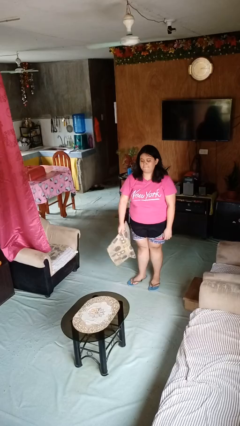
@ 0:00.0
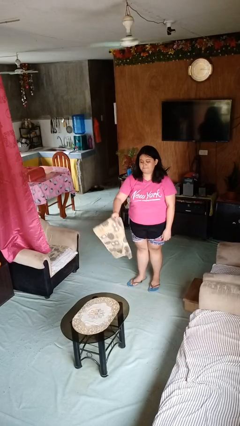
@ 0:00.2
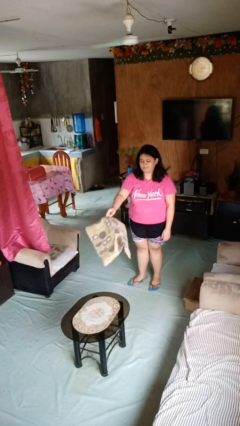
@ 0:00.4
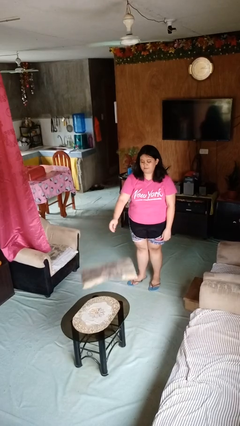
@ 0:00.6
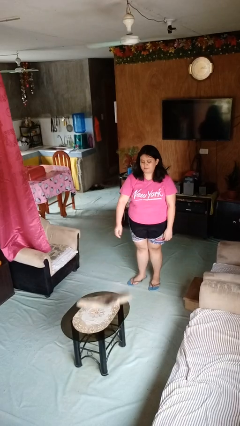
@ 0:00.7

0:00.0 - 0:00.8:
person throws object on table

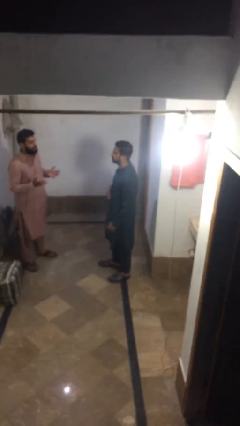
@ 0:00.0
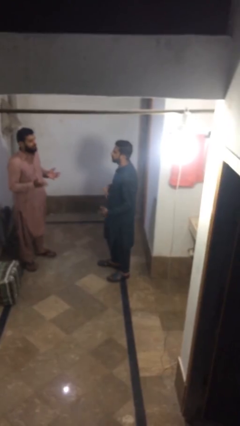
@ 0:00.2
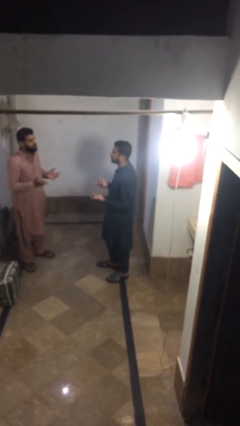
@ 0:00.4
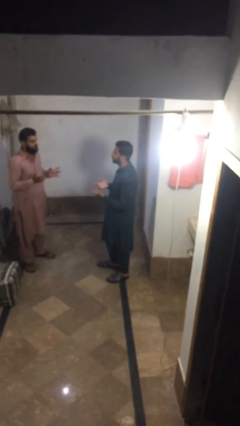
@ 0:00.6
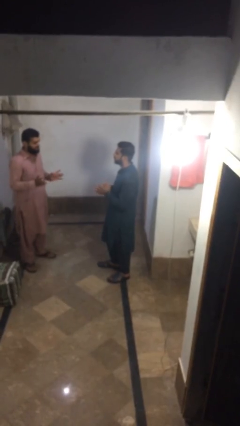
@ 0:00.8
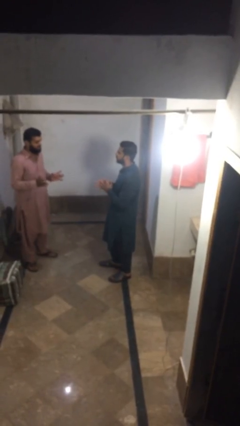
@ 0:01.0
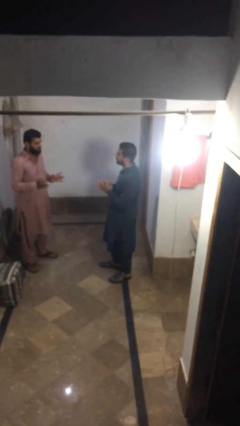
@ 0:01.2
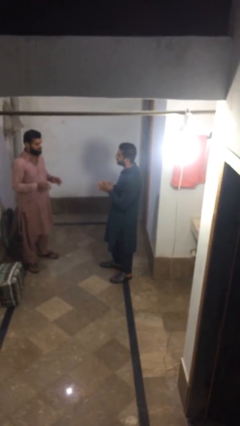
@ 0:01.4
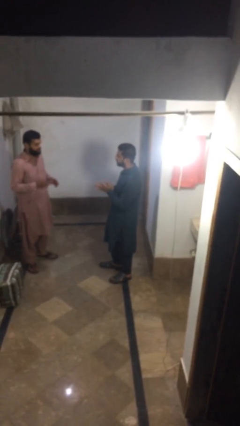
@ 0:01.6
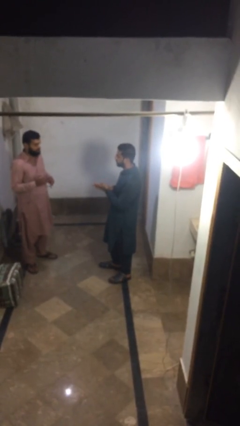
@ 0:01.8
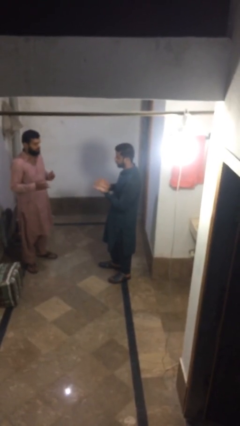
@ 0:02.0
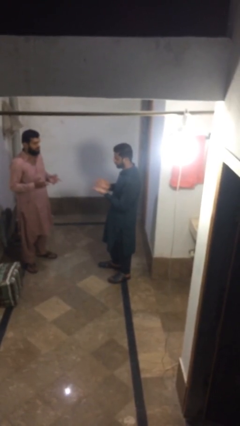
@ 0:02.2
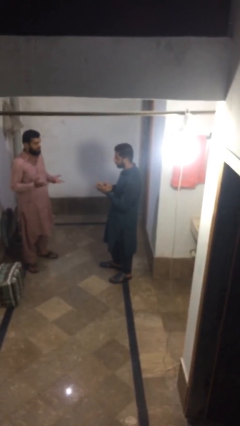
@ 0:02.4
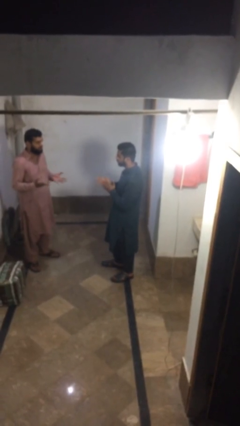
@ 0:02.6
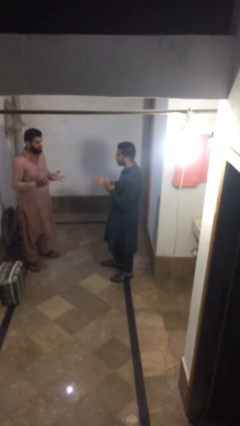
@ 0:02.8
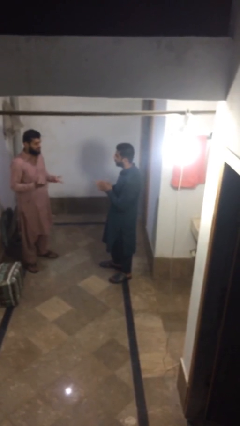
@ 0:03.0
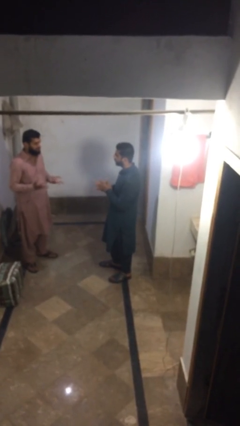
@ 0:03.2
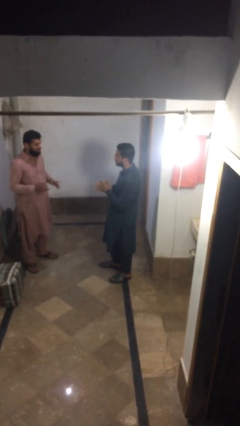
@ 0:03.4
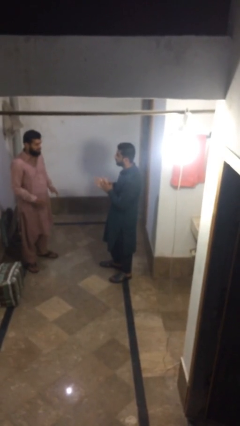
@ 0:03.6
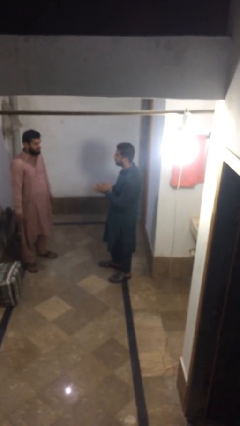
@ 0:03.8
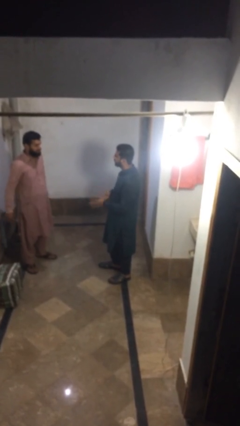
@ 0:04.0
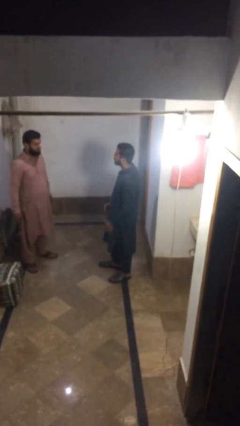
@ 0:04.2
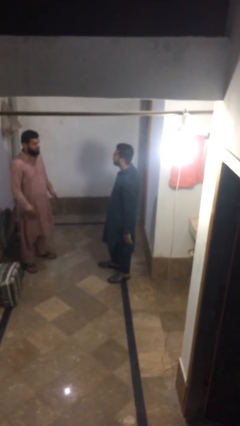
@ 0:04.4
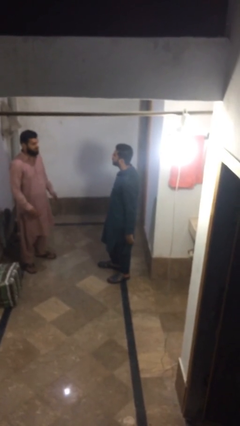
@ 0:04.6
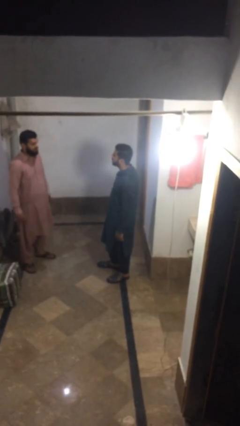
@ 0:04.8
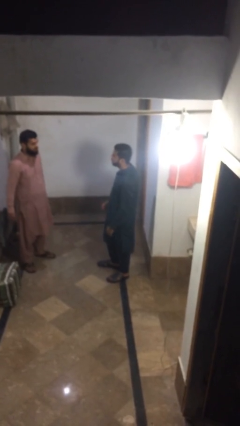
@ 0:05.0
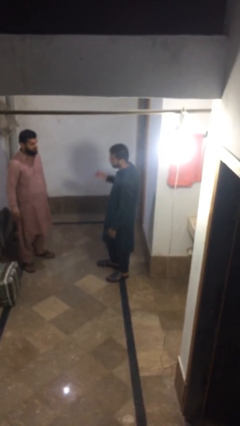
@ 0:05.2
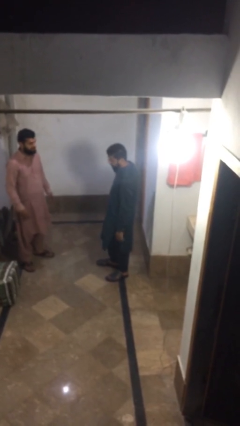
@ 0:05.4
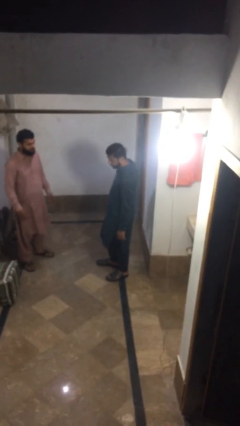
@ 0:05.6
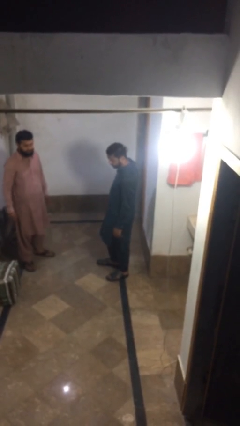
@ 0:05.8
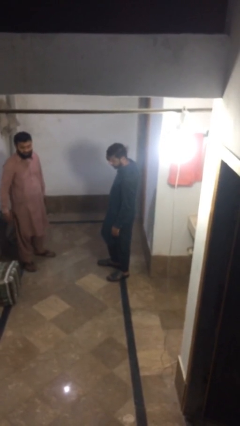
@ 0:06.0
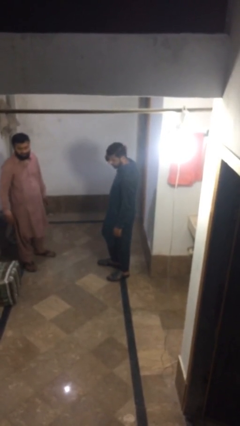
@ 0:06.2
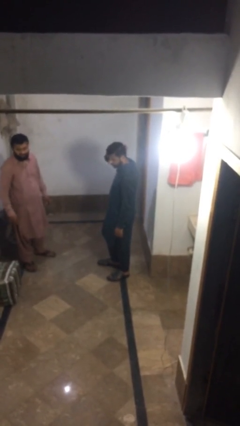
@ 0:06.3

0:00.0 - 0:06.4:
person talks to person

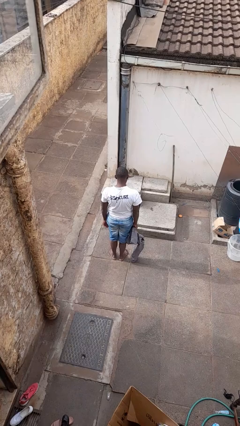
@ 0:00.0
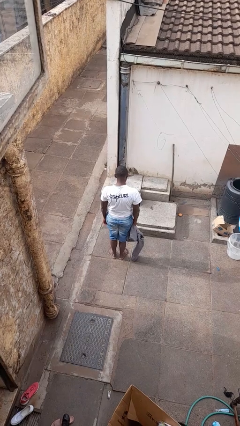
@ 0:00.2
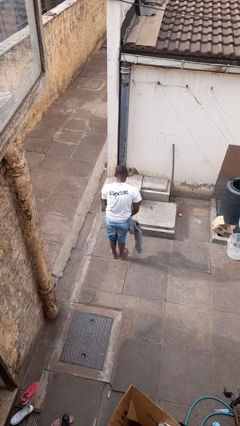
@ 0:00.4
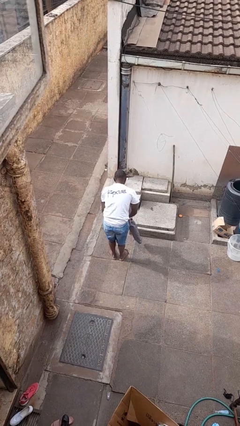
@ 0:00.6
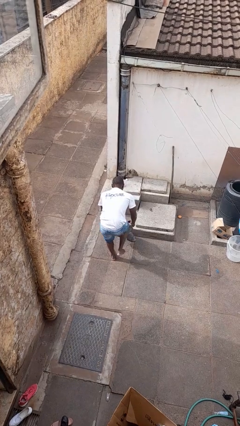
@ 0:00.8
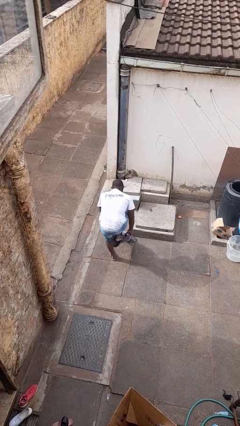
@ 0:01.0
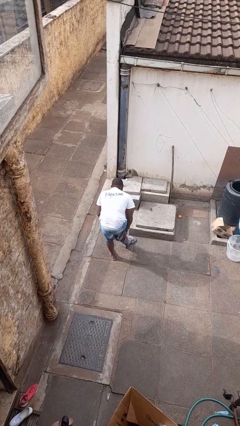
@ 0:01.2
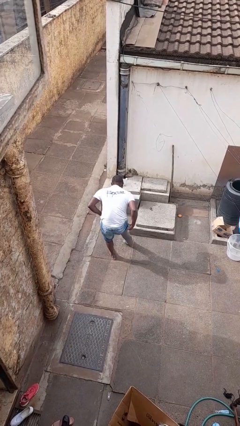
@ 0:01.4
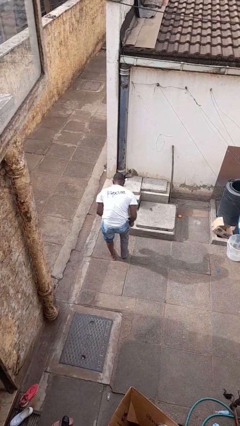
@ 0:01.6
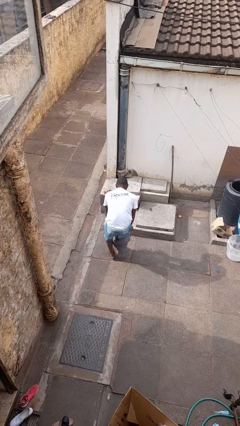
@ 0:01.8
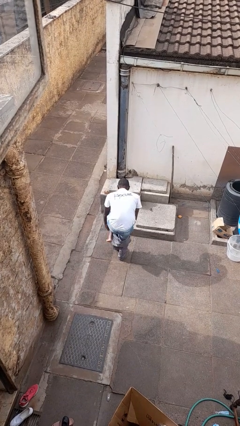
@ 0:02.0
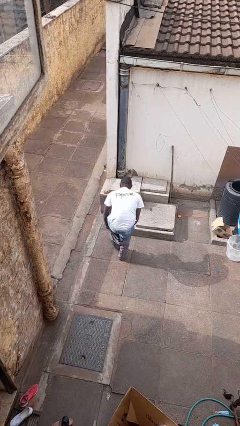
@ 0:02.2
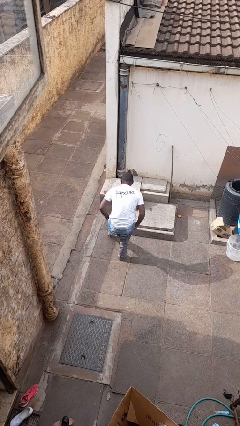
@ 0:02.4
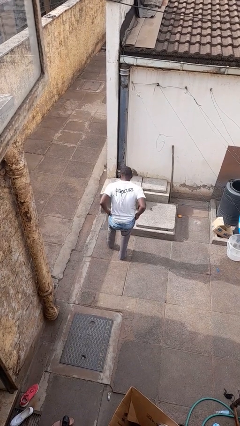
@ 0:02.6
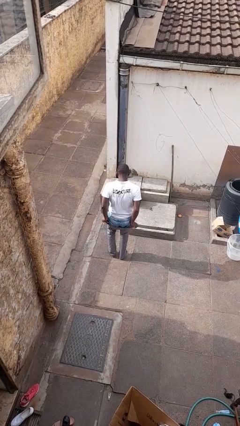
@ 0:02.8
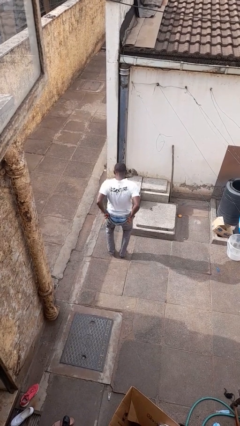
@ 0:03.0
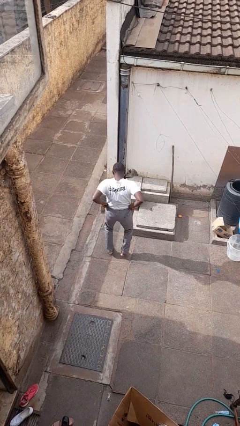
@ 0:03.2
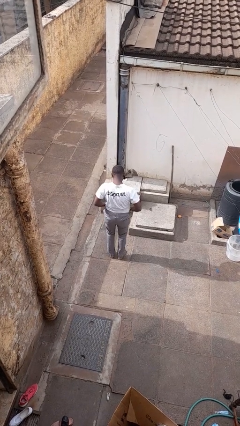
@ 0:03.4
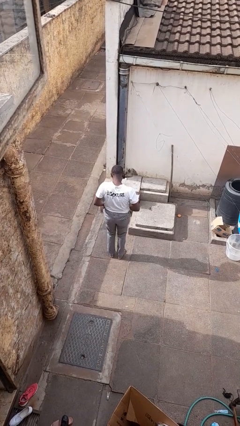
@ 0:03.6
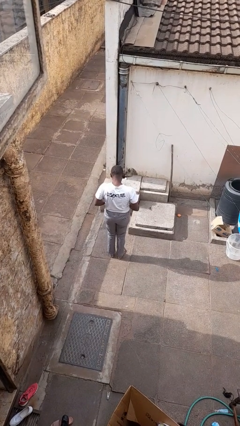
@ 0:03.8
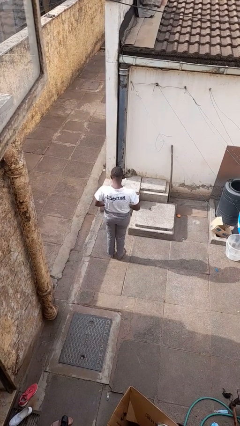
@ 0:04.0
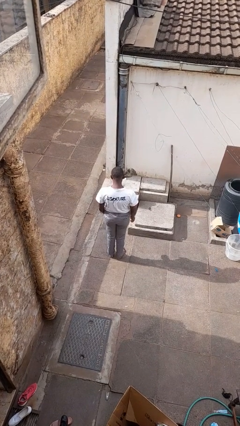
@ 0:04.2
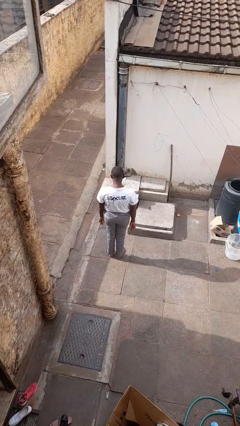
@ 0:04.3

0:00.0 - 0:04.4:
person puts on pants

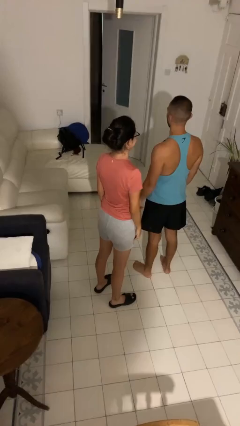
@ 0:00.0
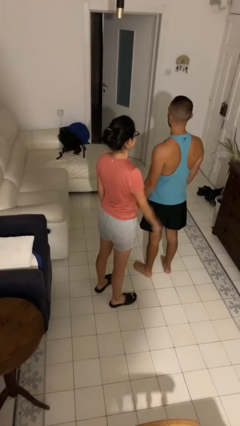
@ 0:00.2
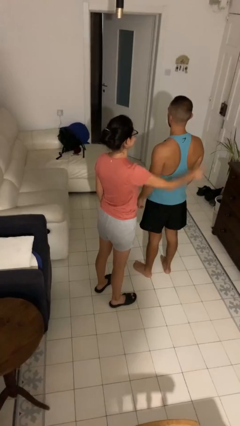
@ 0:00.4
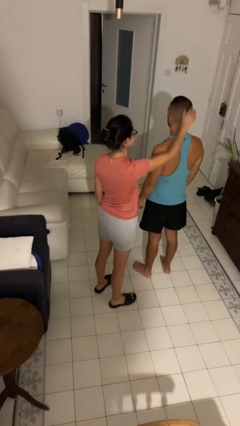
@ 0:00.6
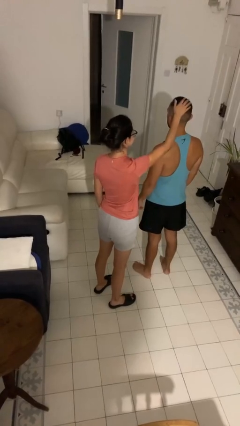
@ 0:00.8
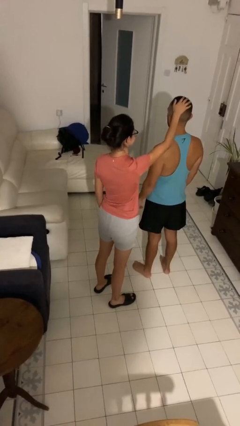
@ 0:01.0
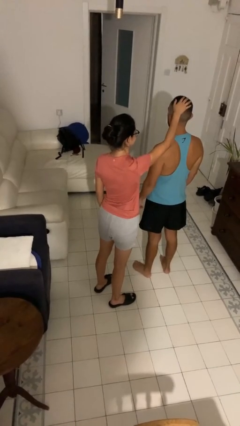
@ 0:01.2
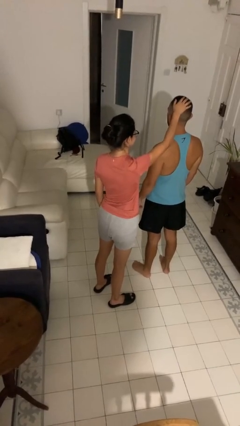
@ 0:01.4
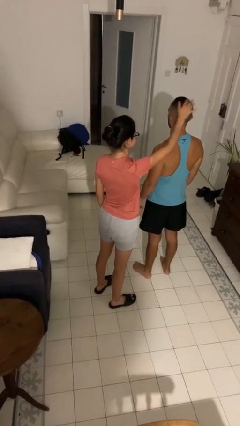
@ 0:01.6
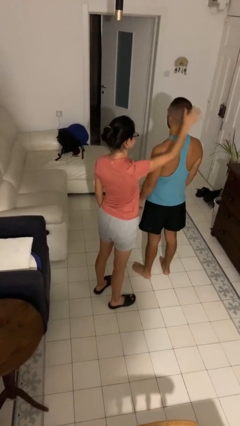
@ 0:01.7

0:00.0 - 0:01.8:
person grabs person by hair

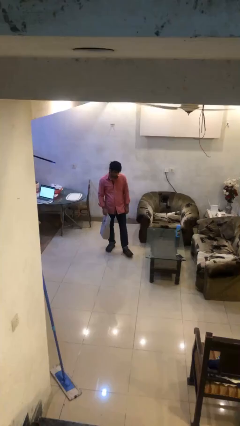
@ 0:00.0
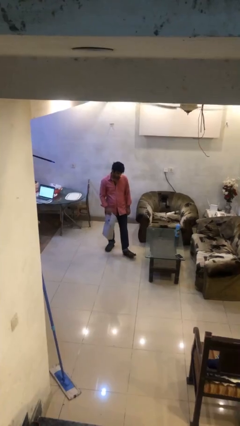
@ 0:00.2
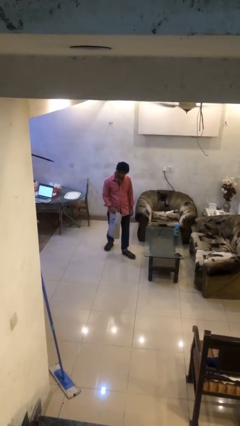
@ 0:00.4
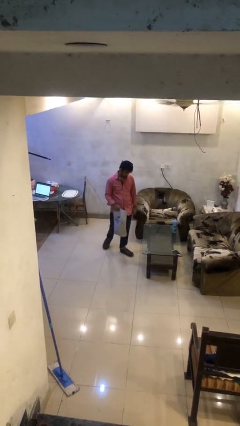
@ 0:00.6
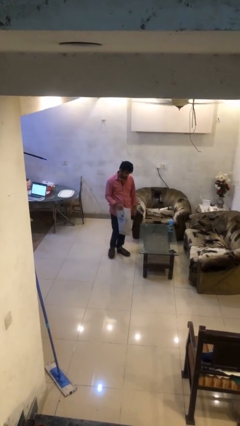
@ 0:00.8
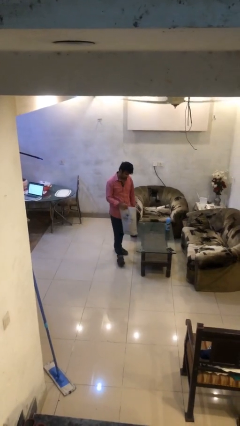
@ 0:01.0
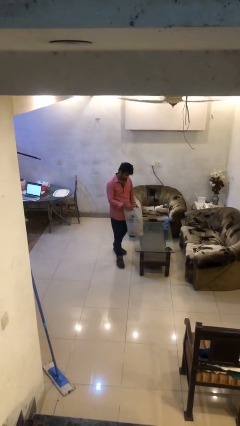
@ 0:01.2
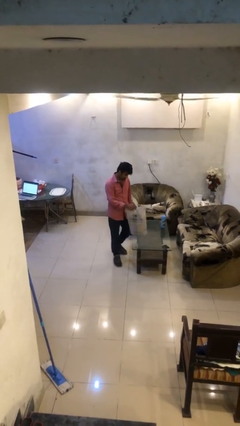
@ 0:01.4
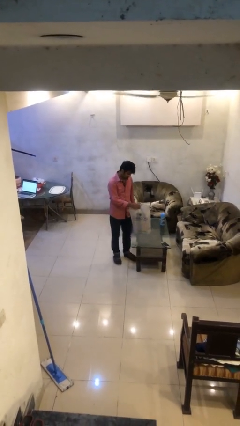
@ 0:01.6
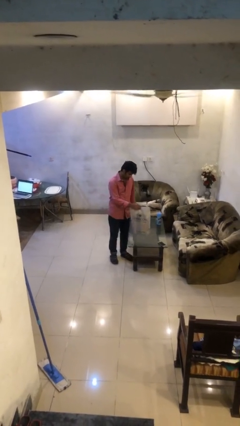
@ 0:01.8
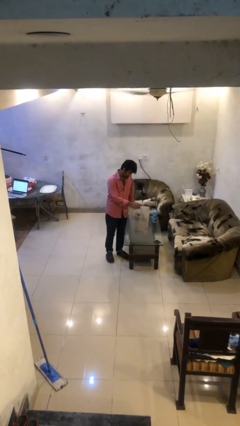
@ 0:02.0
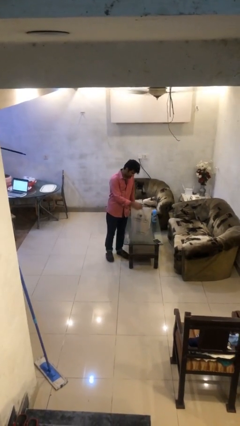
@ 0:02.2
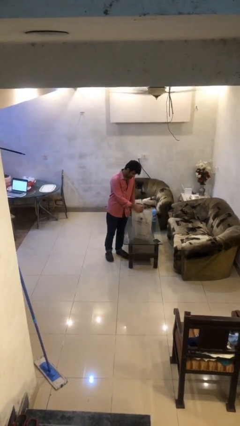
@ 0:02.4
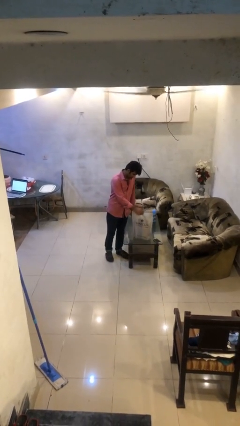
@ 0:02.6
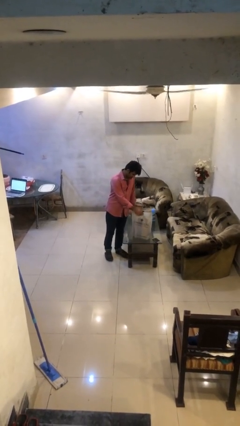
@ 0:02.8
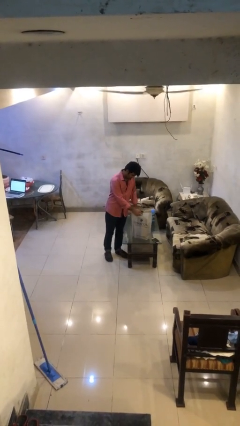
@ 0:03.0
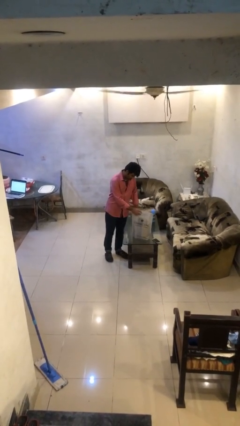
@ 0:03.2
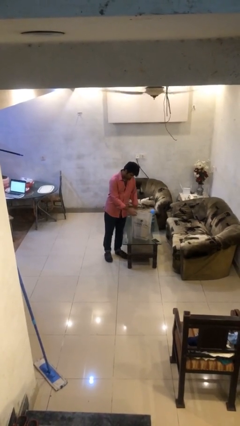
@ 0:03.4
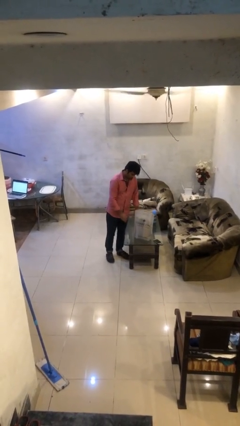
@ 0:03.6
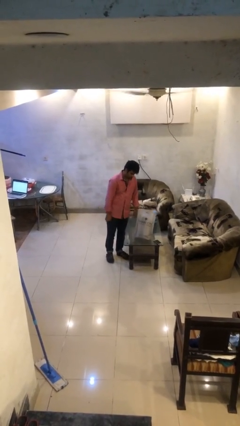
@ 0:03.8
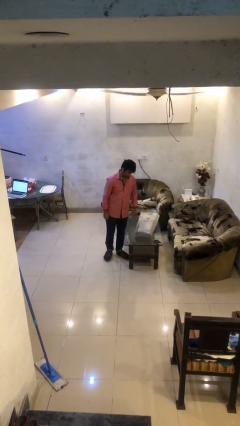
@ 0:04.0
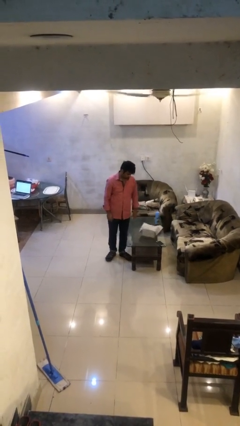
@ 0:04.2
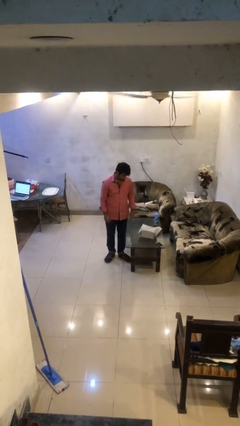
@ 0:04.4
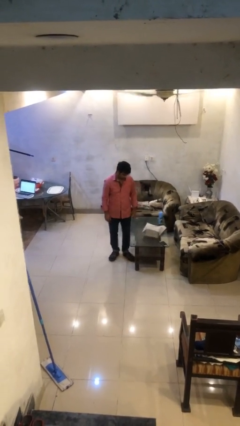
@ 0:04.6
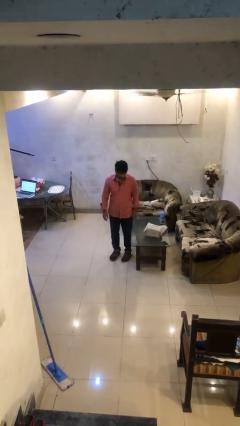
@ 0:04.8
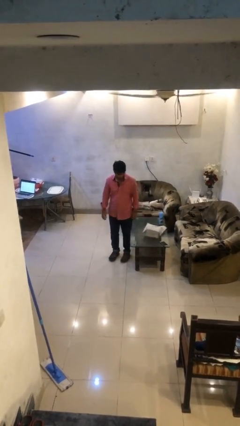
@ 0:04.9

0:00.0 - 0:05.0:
person puts down object on table
